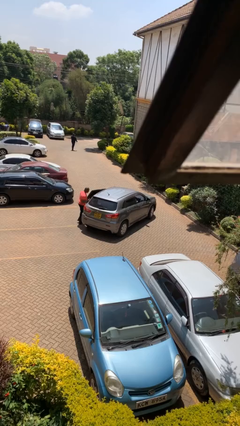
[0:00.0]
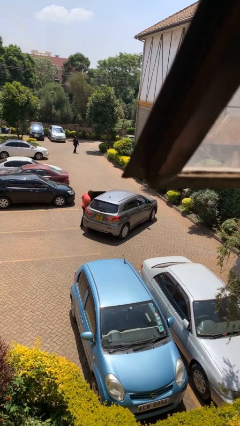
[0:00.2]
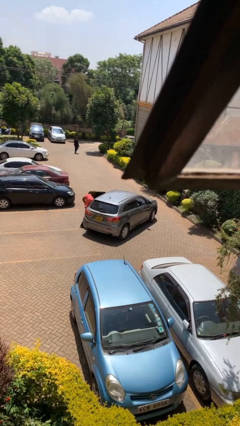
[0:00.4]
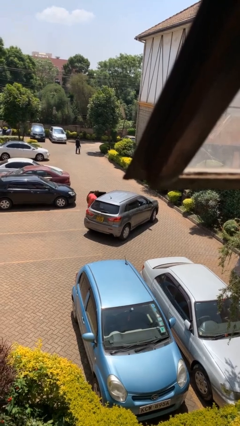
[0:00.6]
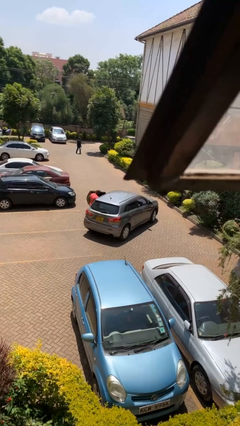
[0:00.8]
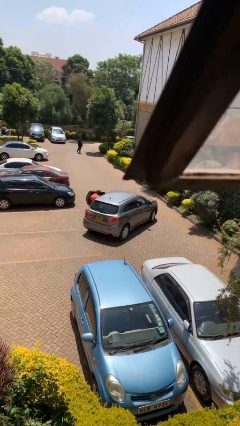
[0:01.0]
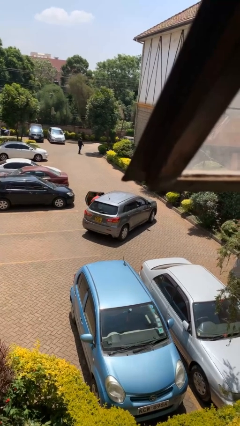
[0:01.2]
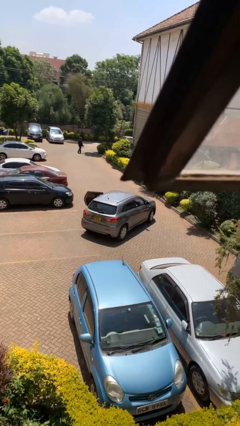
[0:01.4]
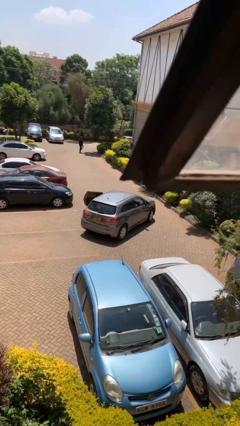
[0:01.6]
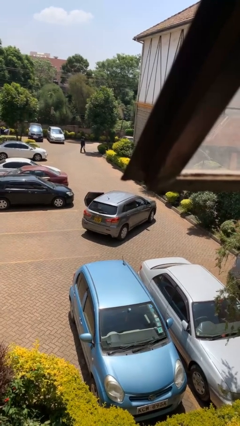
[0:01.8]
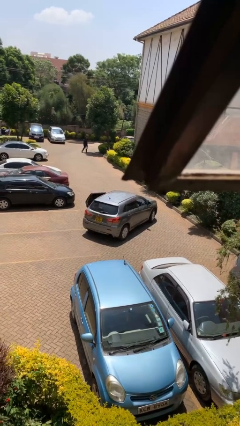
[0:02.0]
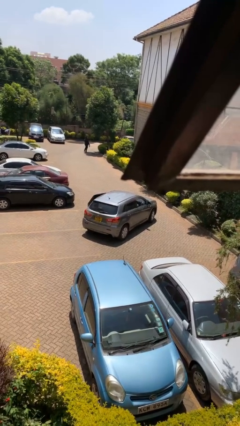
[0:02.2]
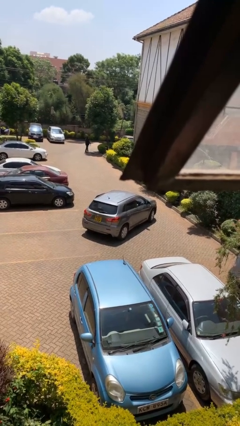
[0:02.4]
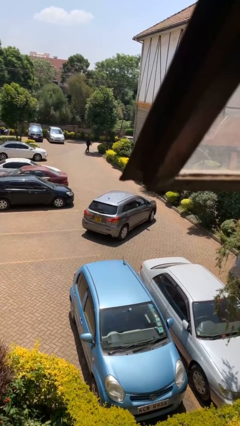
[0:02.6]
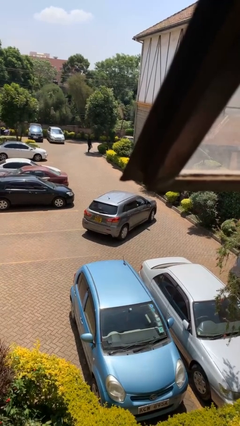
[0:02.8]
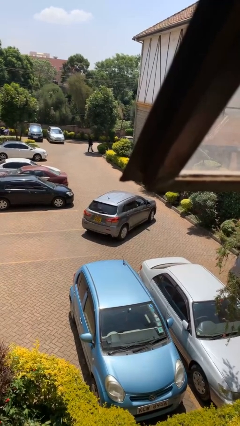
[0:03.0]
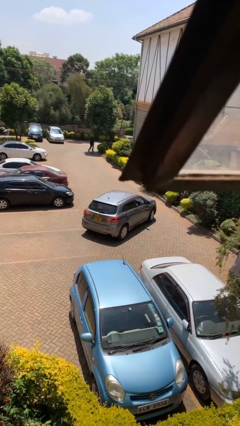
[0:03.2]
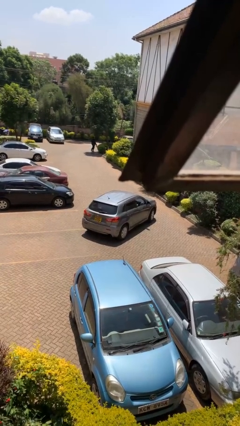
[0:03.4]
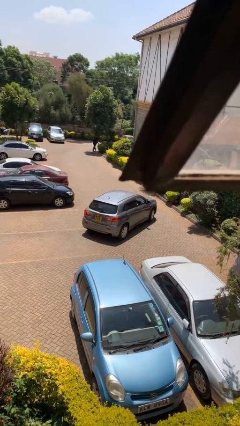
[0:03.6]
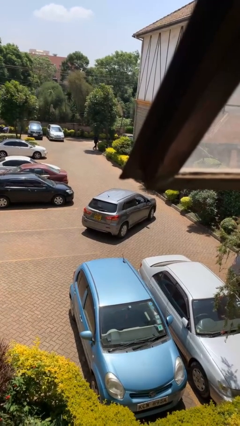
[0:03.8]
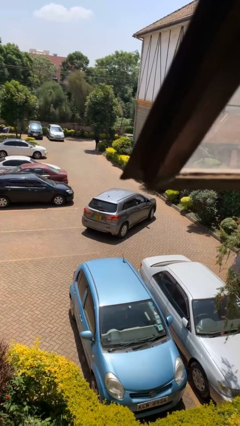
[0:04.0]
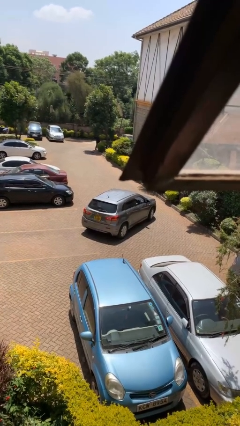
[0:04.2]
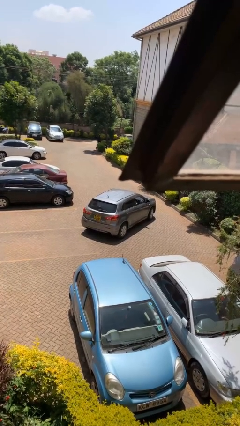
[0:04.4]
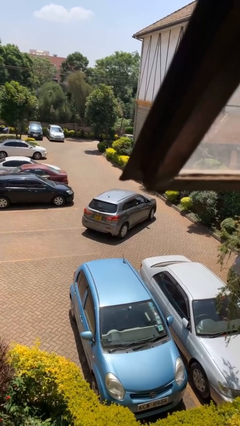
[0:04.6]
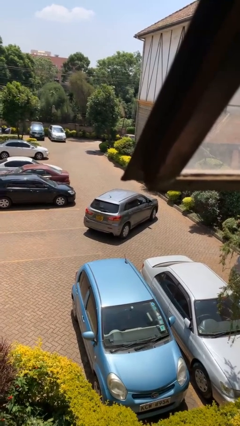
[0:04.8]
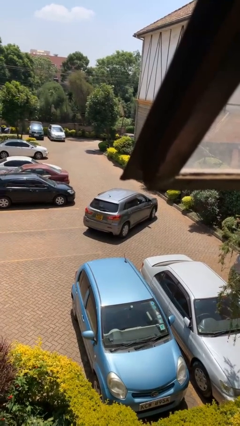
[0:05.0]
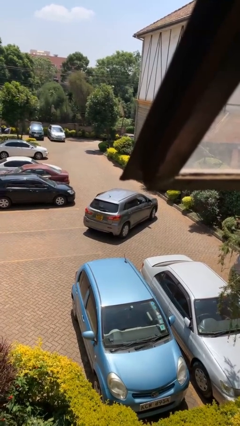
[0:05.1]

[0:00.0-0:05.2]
car picks up person

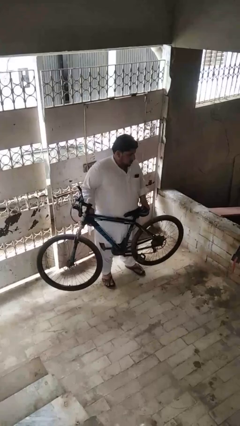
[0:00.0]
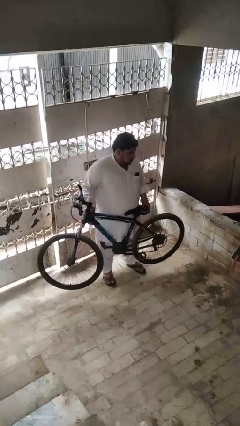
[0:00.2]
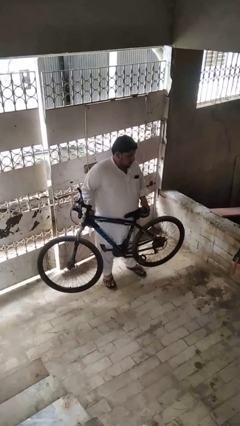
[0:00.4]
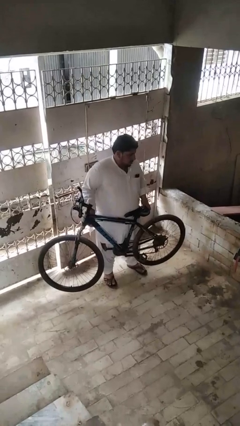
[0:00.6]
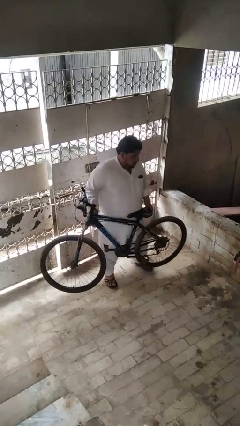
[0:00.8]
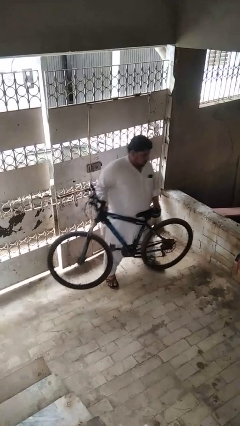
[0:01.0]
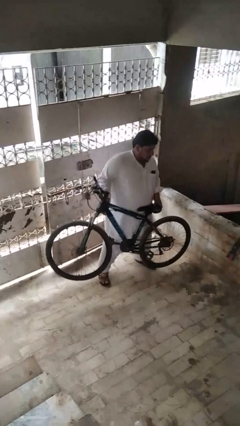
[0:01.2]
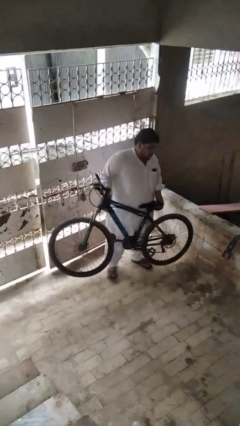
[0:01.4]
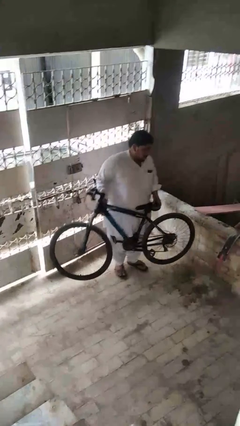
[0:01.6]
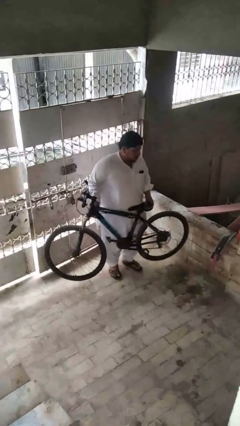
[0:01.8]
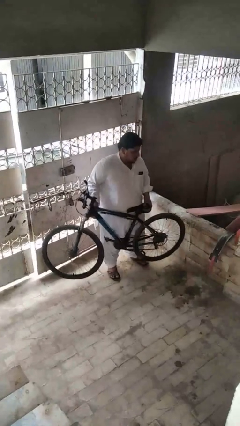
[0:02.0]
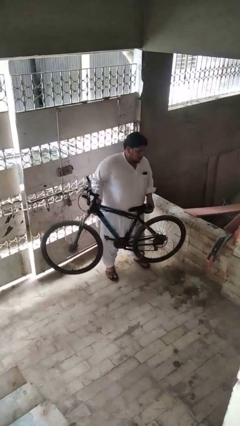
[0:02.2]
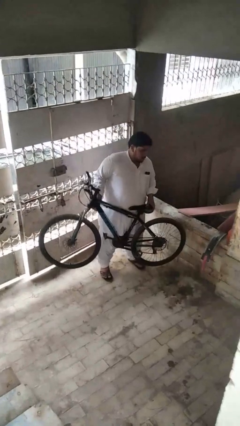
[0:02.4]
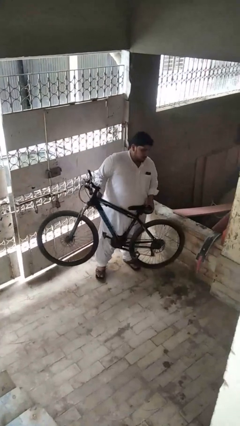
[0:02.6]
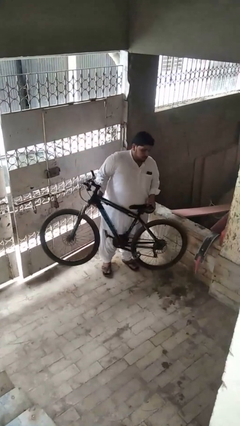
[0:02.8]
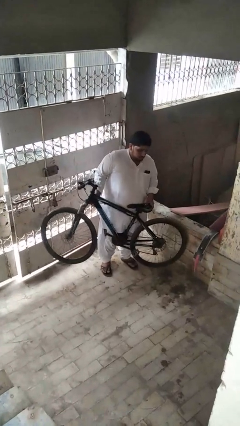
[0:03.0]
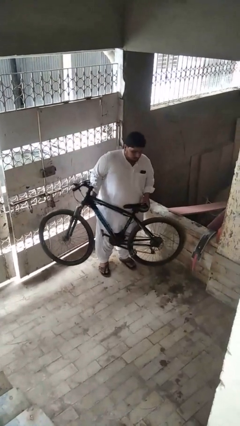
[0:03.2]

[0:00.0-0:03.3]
person carries bicycle

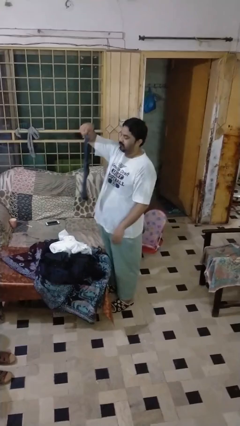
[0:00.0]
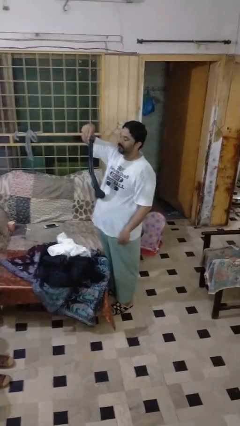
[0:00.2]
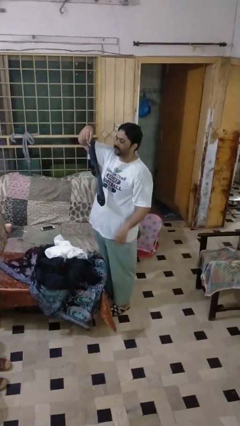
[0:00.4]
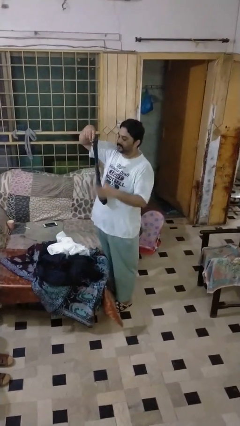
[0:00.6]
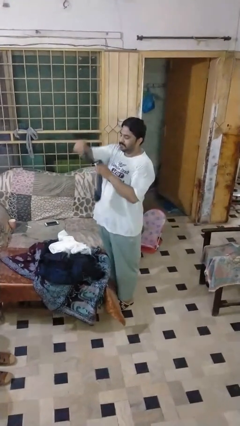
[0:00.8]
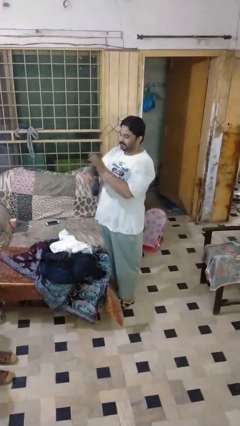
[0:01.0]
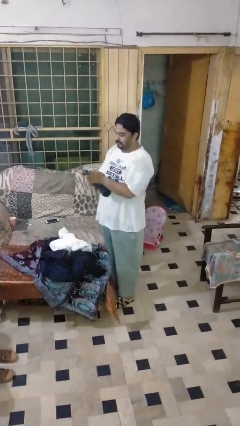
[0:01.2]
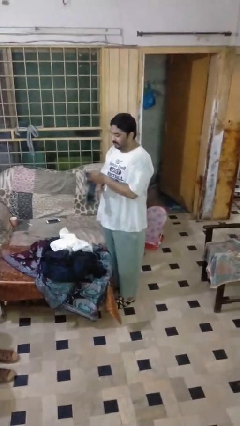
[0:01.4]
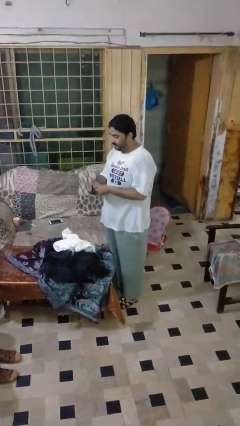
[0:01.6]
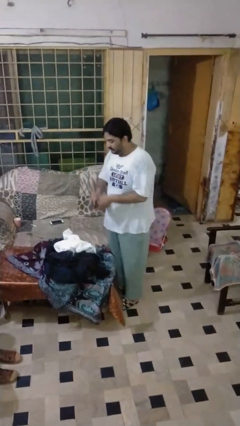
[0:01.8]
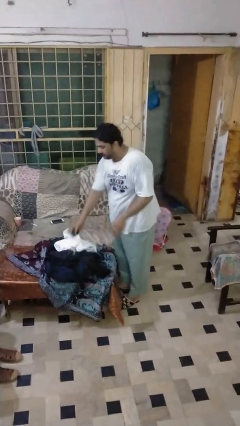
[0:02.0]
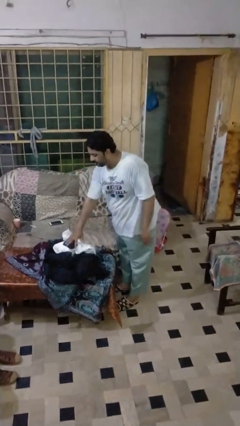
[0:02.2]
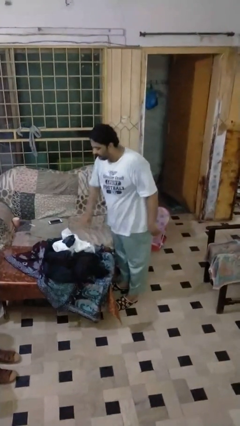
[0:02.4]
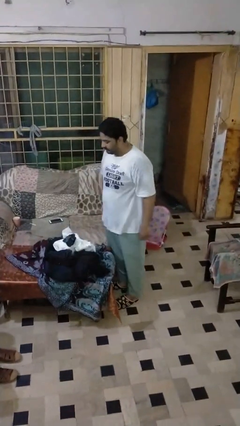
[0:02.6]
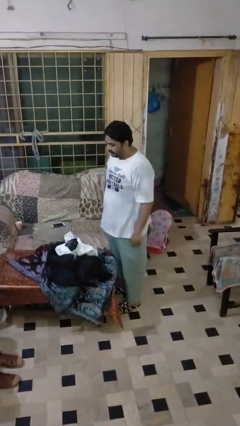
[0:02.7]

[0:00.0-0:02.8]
person folds socks

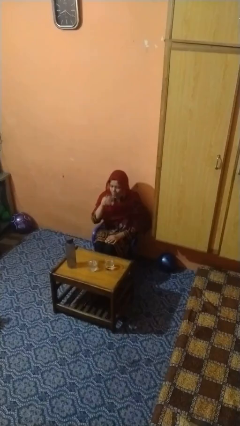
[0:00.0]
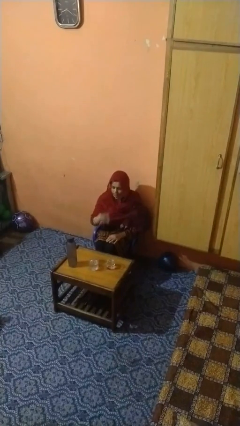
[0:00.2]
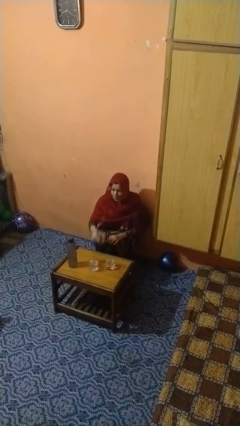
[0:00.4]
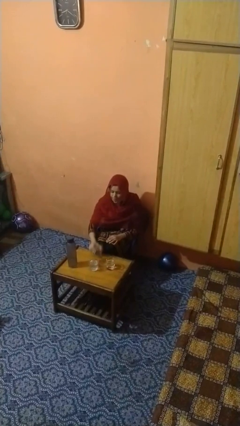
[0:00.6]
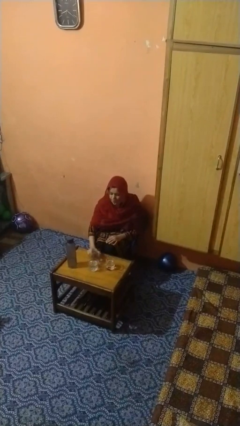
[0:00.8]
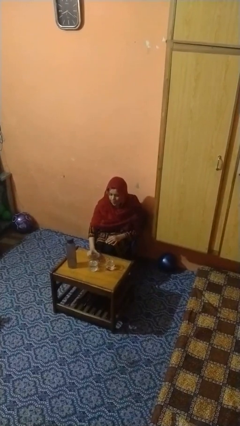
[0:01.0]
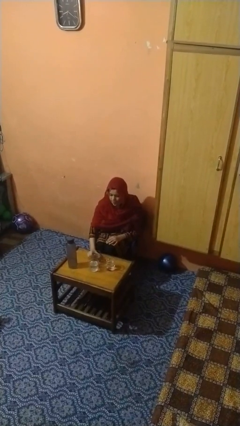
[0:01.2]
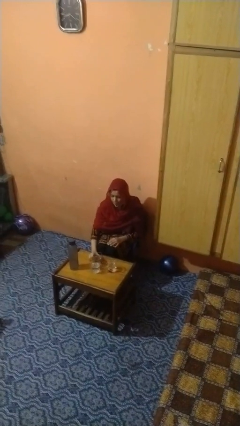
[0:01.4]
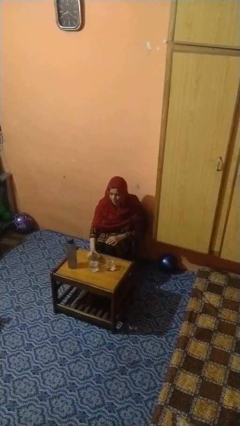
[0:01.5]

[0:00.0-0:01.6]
person puts down object on table

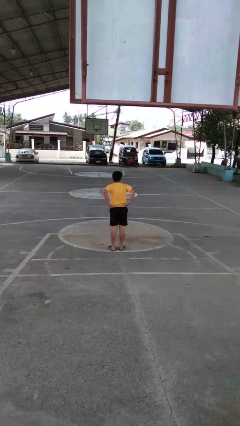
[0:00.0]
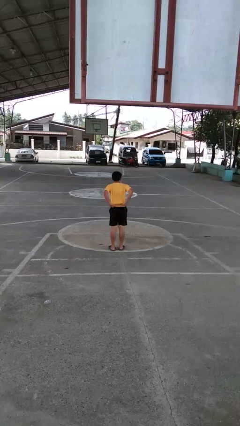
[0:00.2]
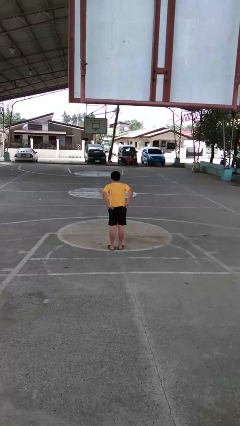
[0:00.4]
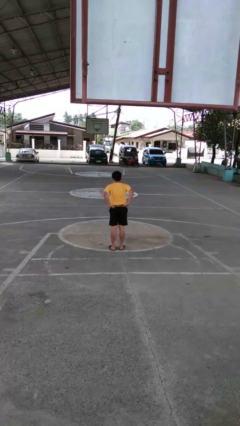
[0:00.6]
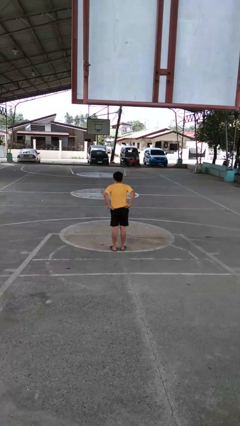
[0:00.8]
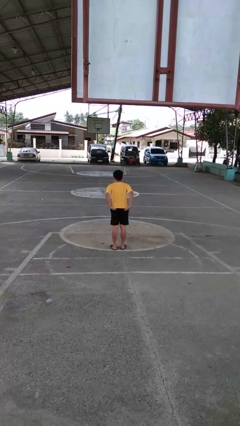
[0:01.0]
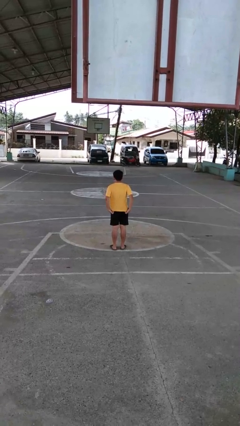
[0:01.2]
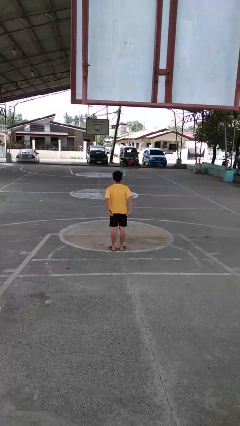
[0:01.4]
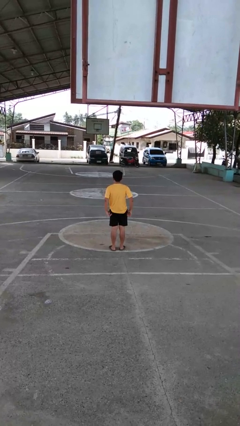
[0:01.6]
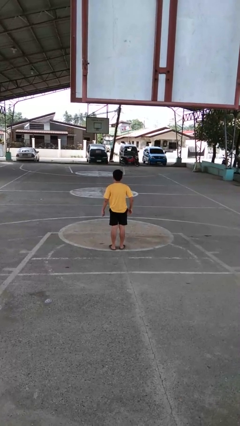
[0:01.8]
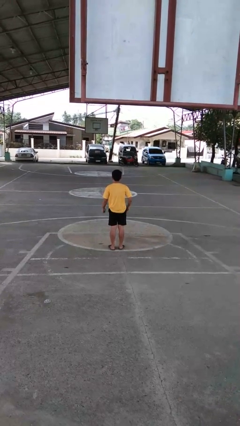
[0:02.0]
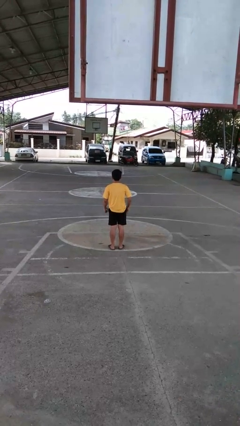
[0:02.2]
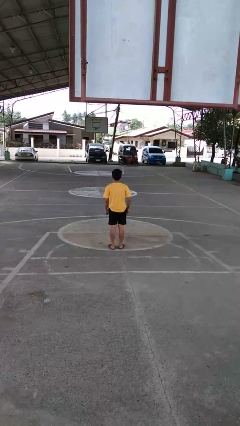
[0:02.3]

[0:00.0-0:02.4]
person untucks shirt

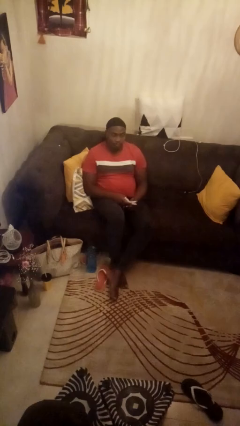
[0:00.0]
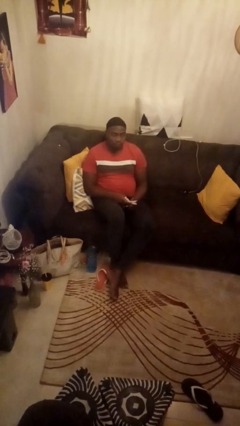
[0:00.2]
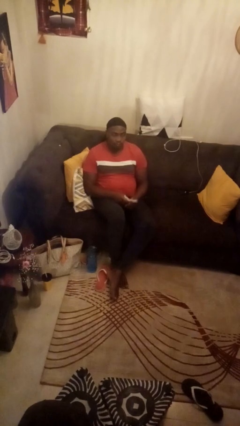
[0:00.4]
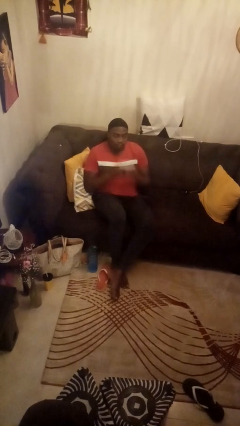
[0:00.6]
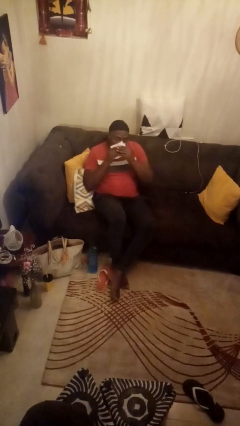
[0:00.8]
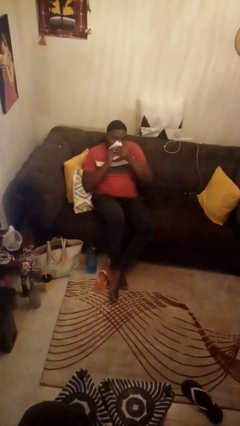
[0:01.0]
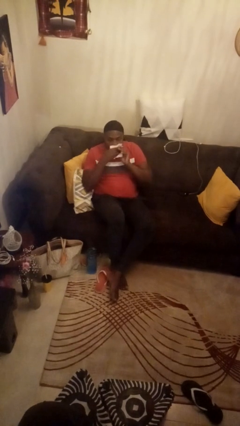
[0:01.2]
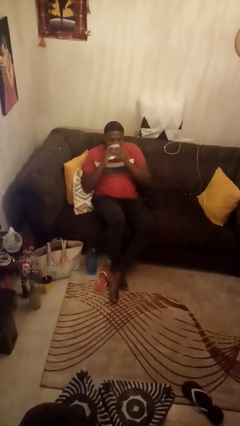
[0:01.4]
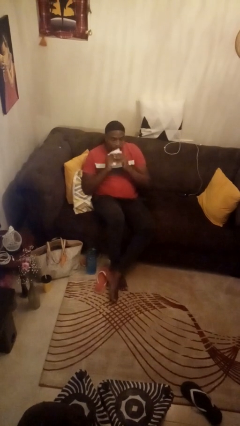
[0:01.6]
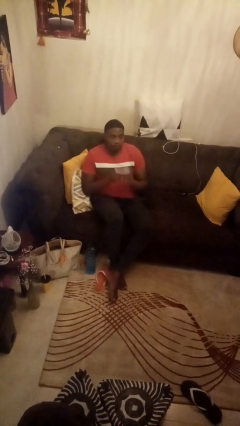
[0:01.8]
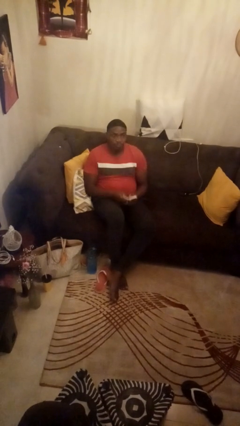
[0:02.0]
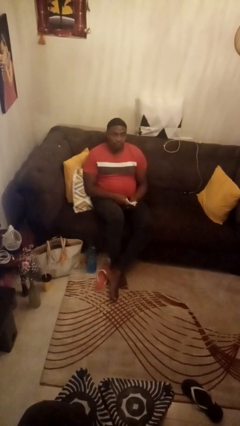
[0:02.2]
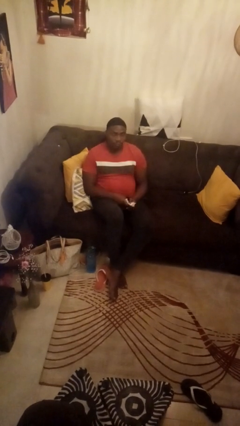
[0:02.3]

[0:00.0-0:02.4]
person wipes mouth with napkin
